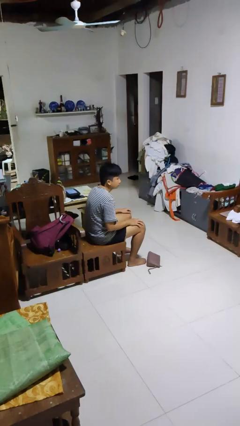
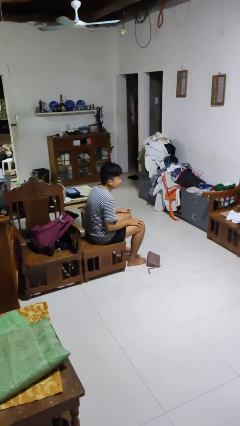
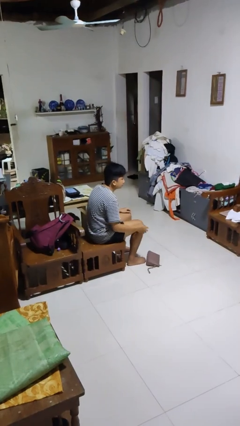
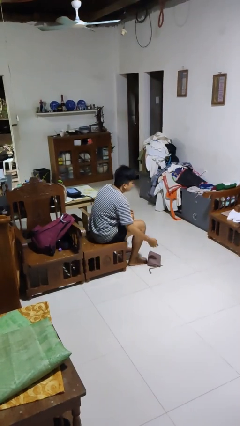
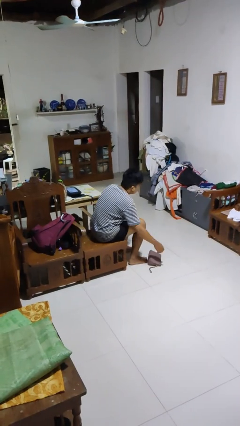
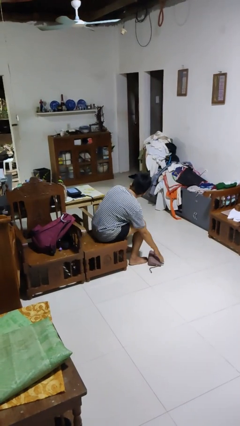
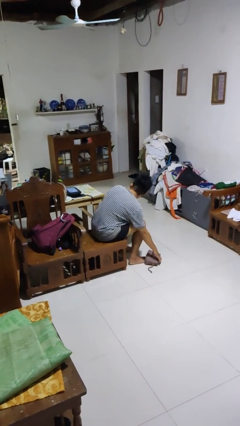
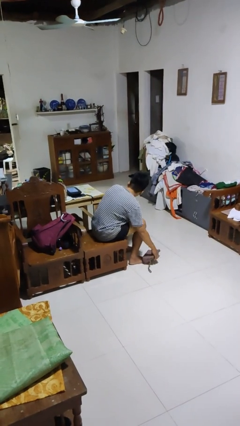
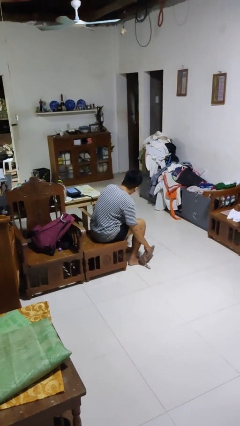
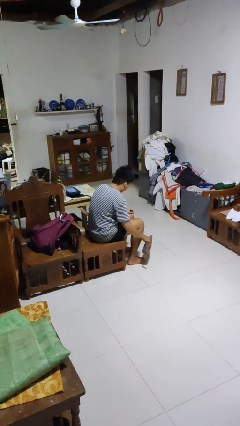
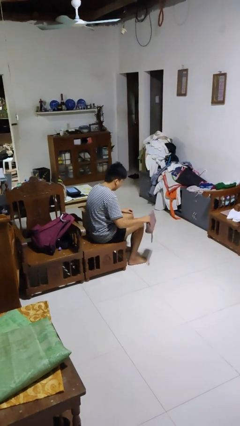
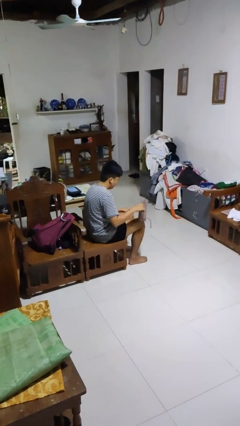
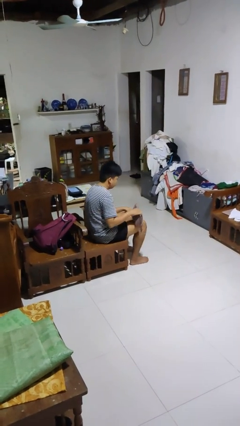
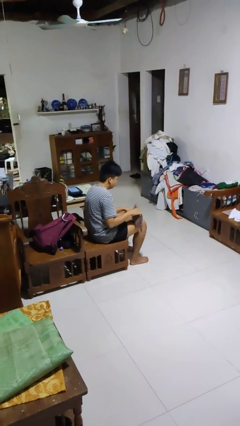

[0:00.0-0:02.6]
person picks up object from floor

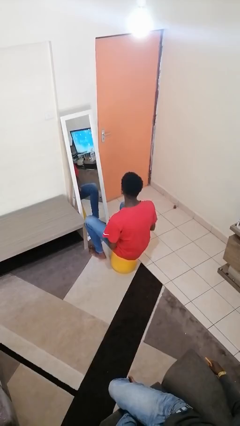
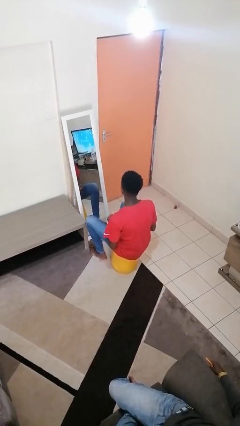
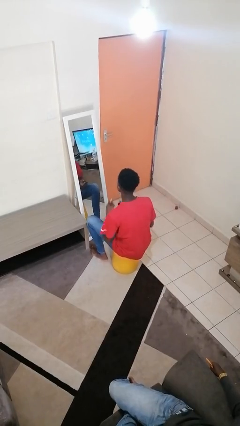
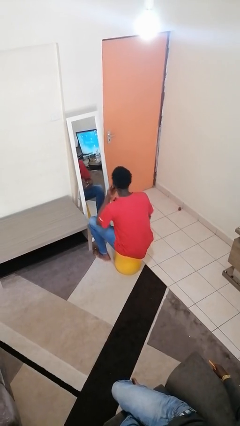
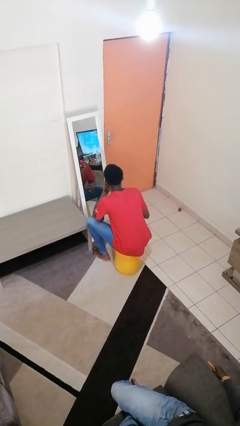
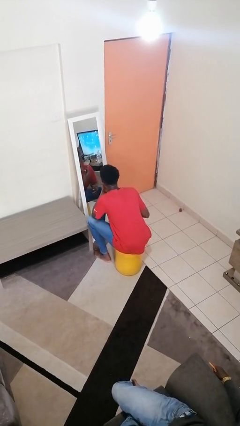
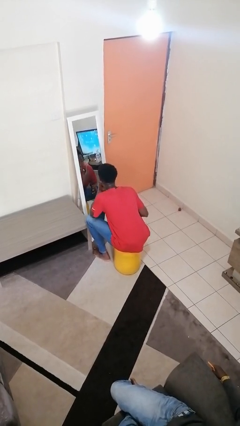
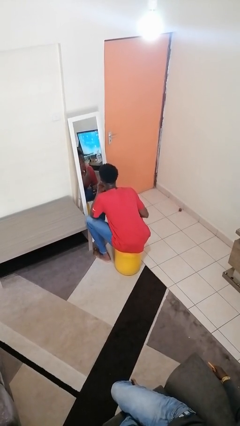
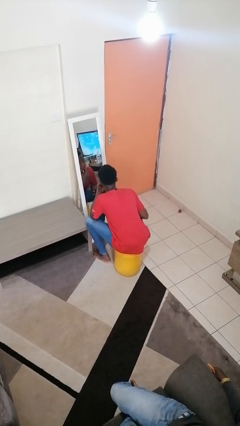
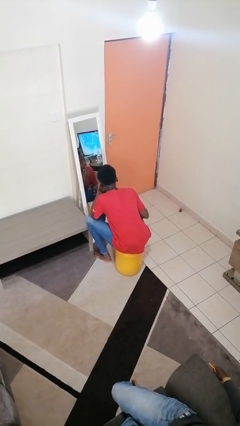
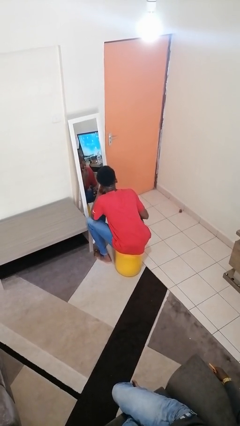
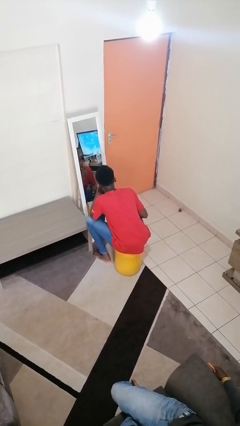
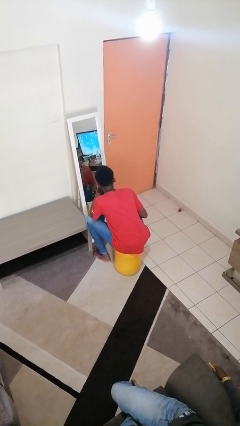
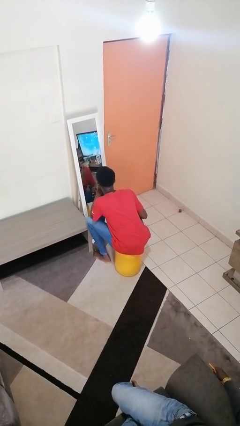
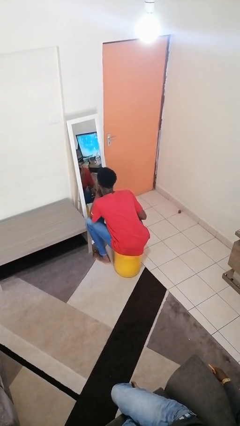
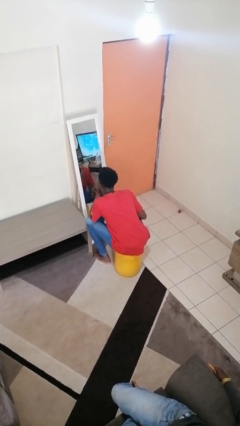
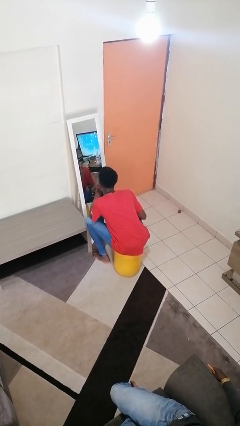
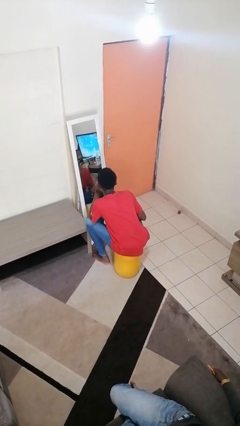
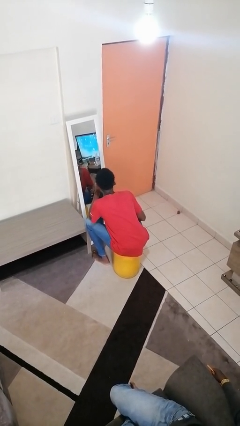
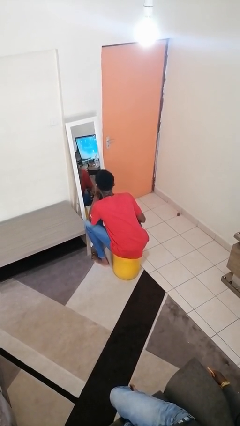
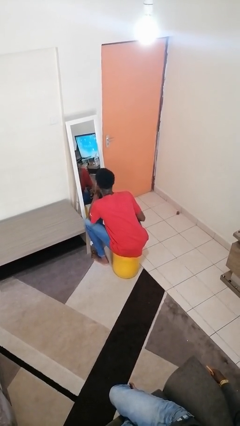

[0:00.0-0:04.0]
person applies lip makeup

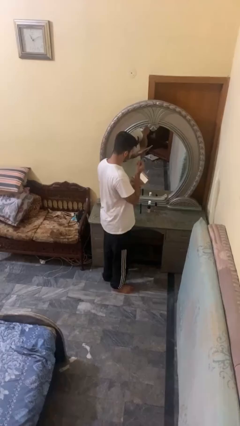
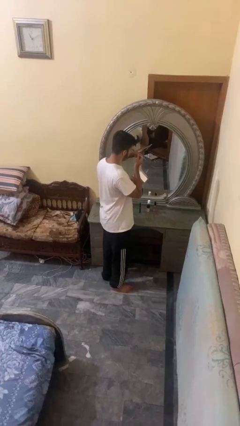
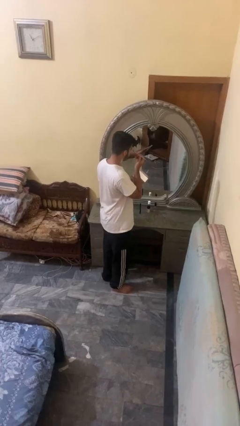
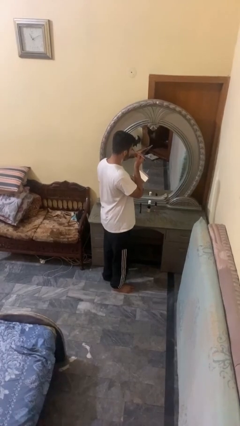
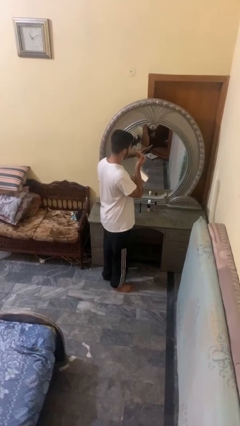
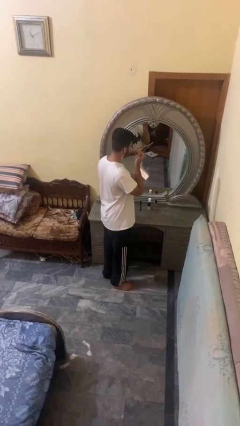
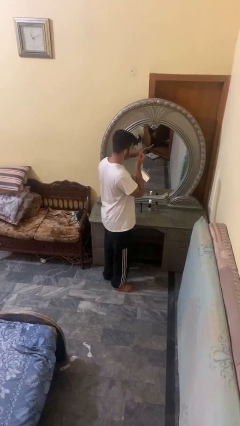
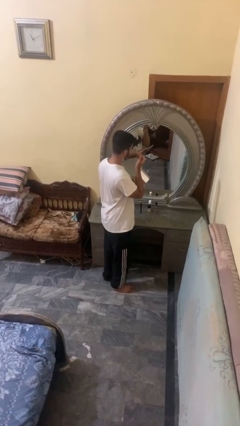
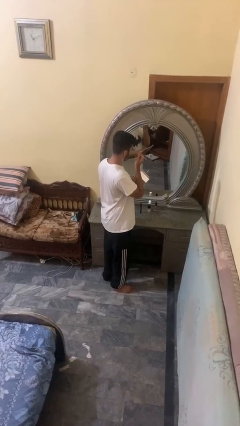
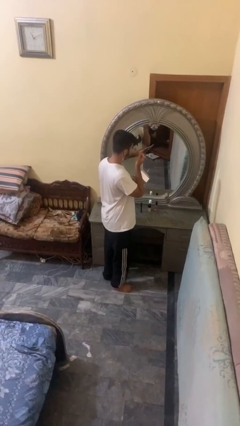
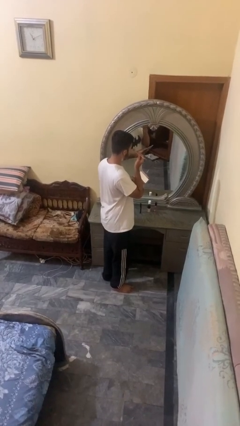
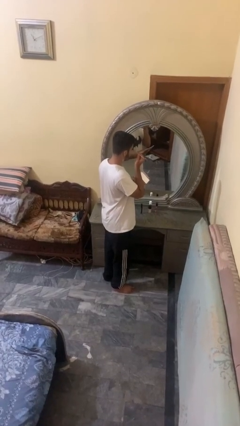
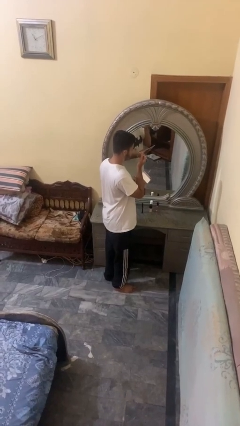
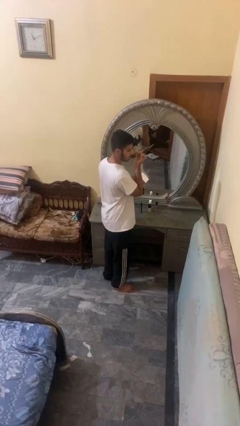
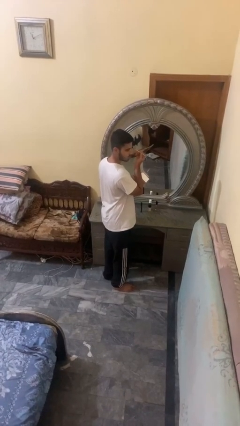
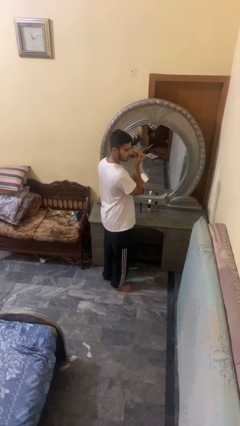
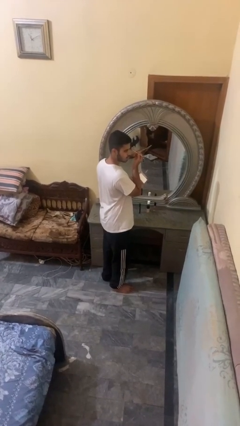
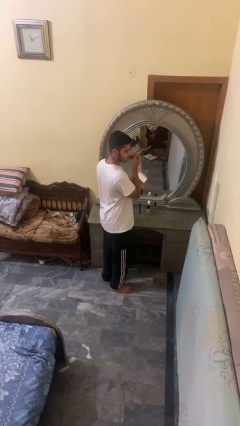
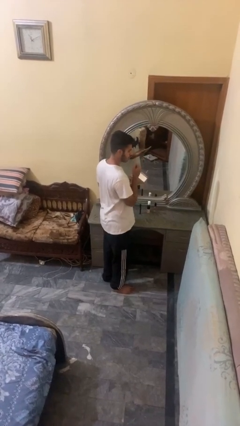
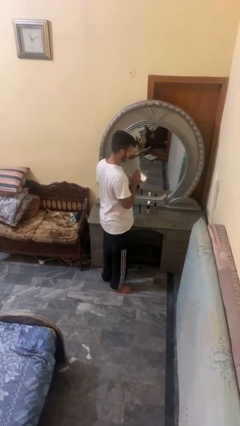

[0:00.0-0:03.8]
person applies eye makeup

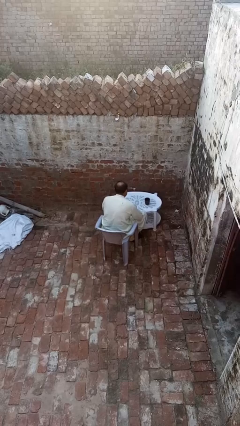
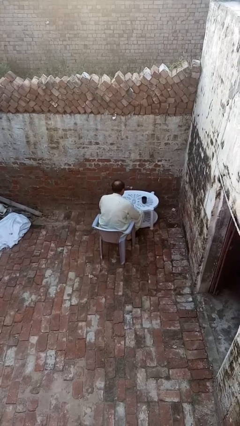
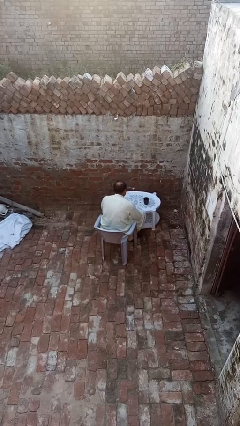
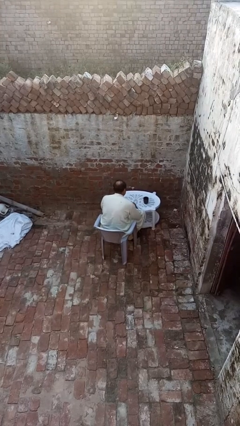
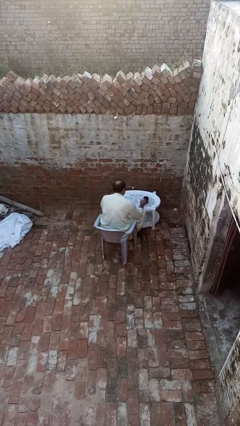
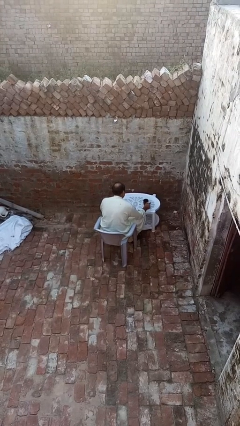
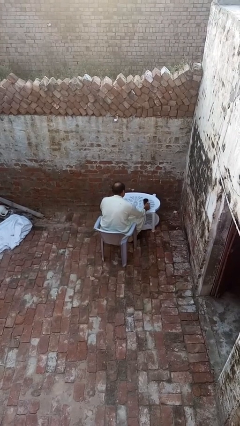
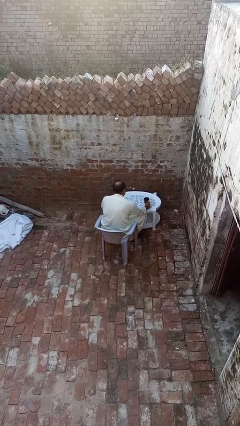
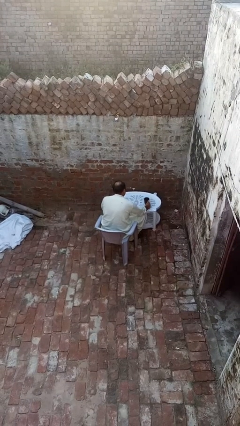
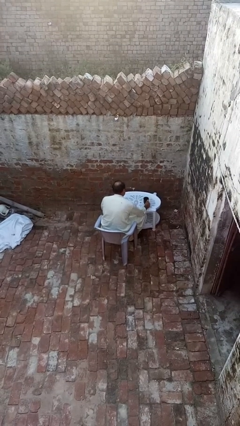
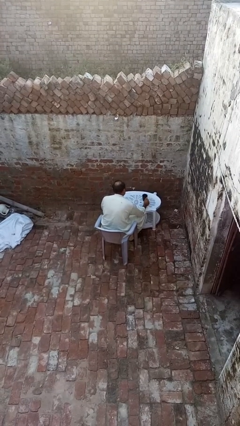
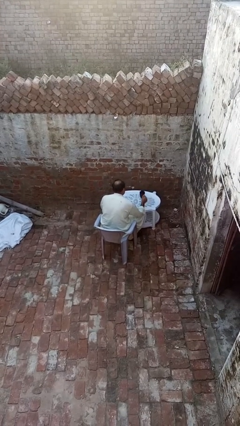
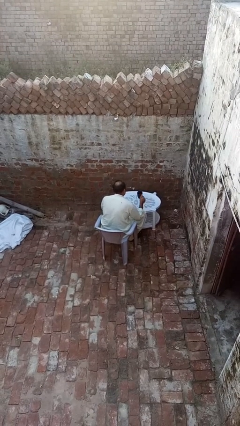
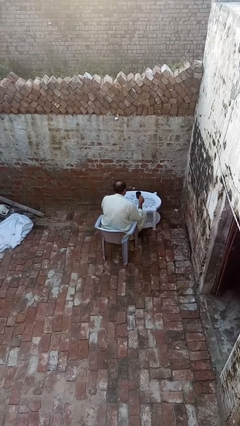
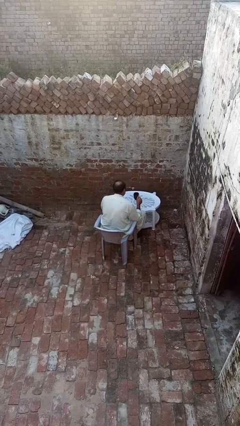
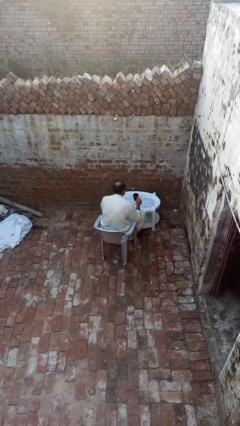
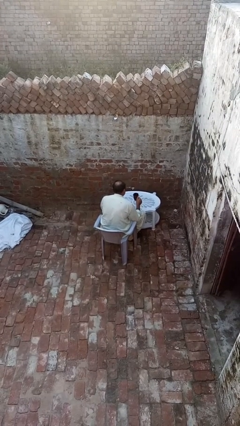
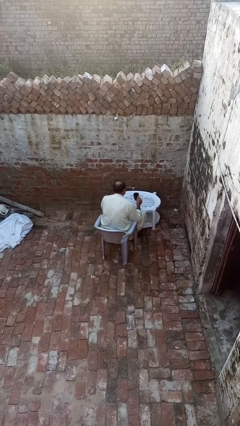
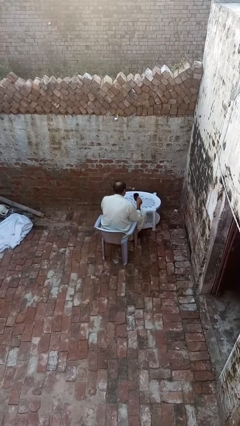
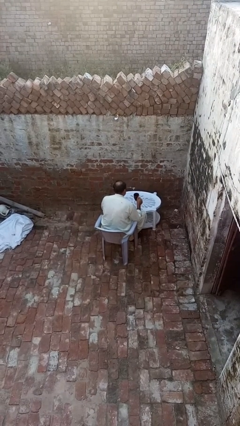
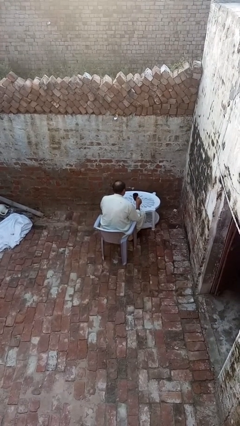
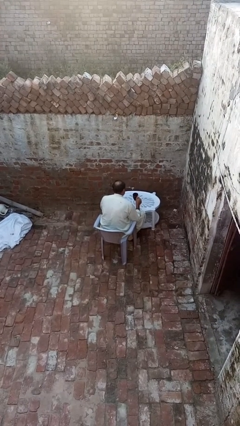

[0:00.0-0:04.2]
person picks up object from table

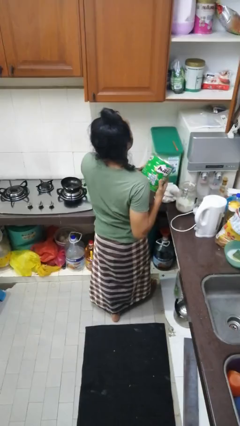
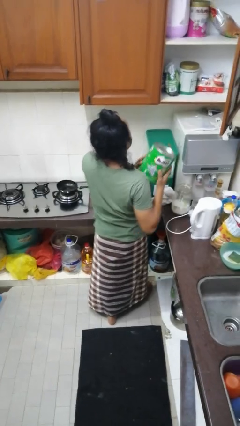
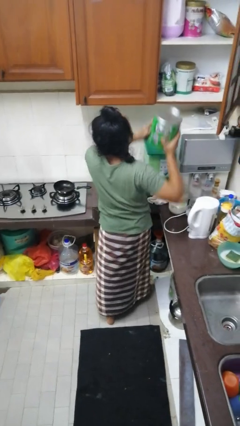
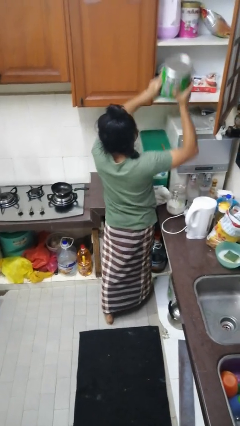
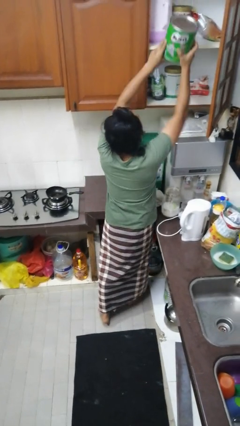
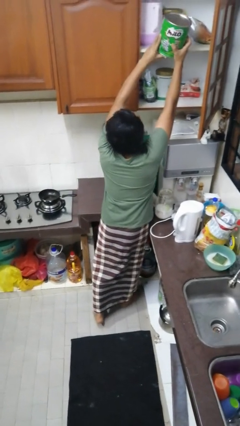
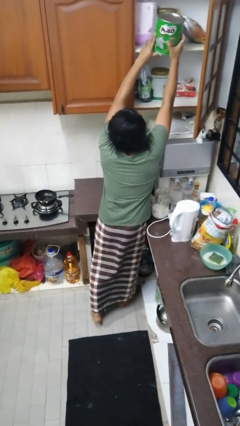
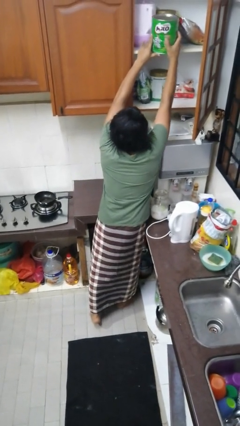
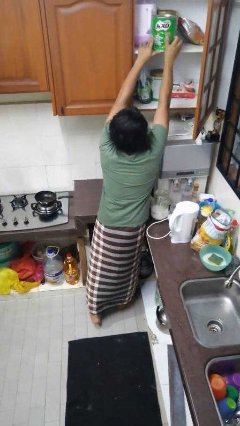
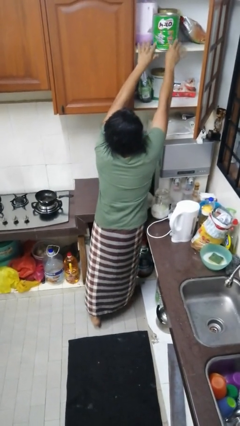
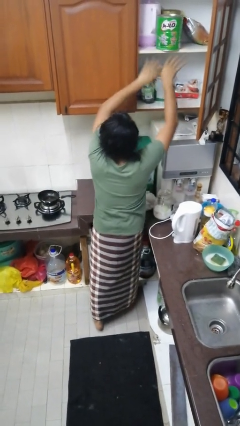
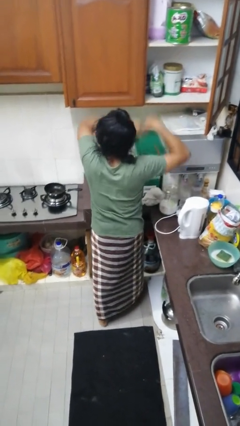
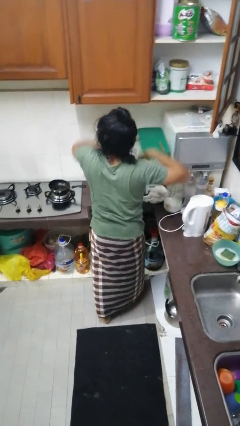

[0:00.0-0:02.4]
person puts object in cabinet
